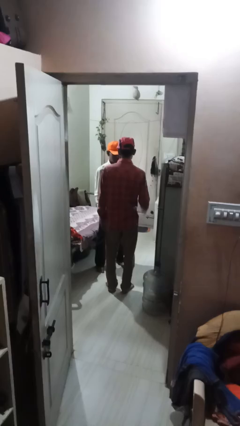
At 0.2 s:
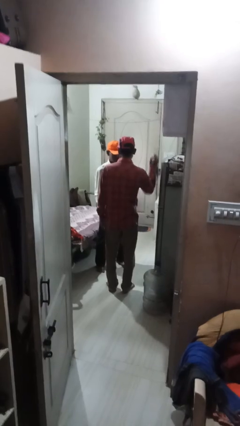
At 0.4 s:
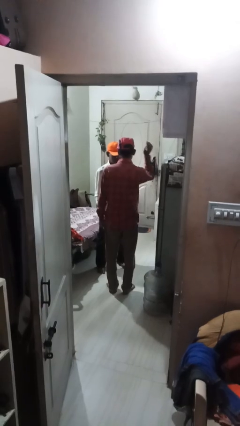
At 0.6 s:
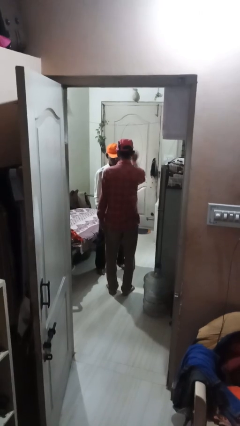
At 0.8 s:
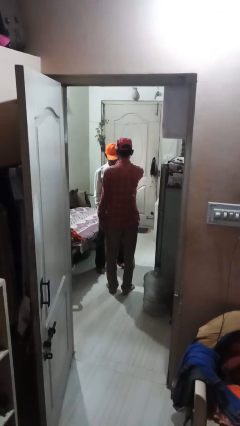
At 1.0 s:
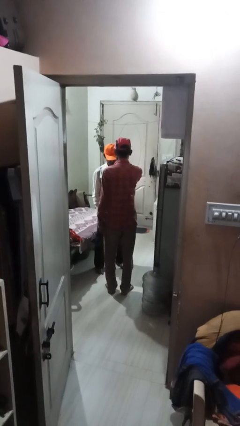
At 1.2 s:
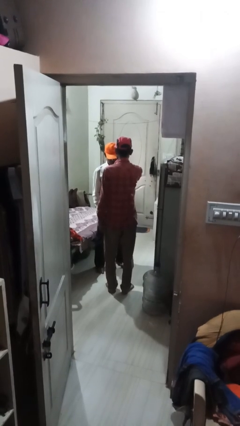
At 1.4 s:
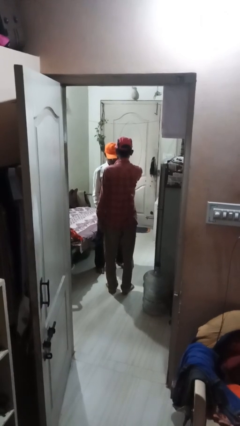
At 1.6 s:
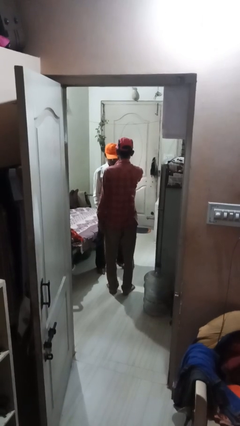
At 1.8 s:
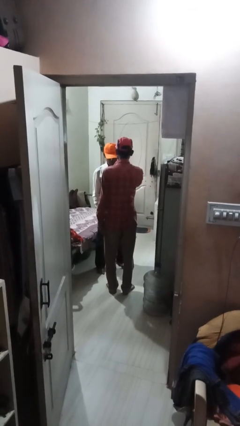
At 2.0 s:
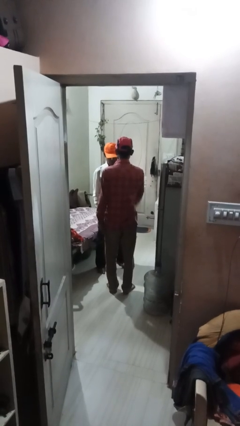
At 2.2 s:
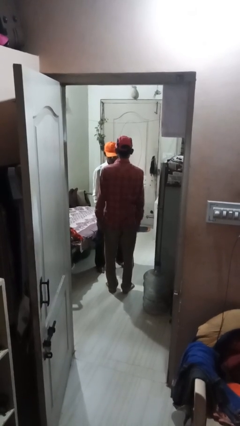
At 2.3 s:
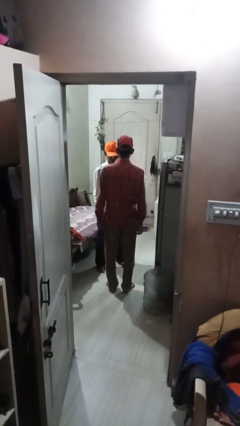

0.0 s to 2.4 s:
person pounds shoulders of person

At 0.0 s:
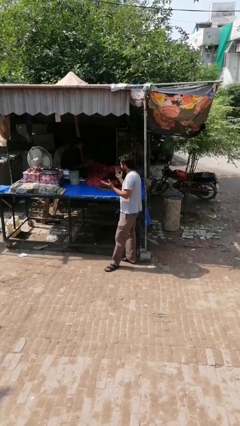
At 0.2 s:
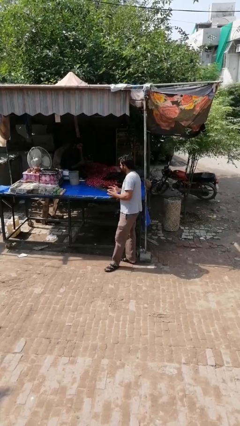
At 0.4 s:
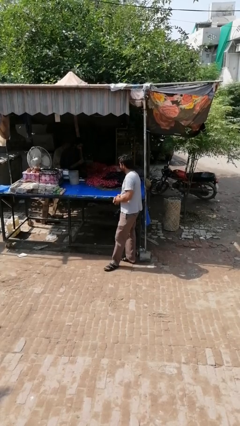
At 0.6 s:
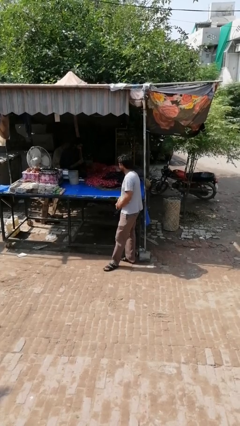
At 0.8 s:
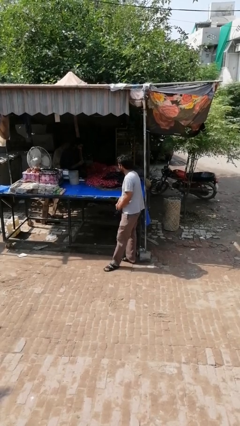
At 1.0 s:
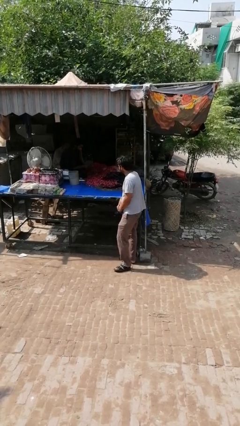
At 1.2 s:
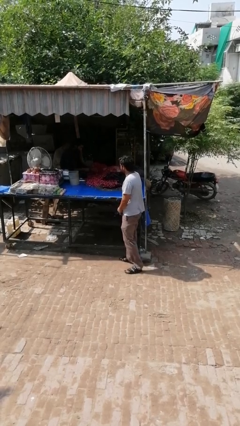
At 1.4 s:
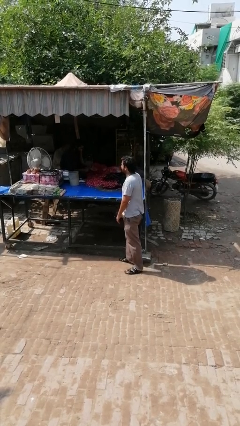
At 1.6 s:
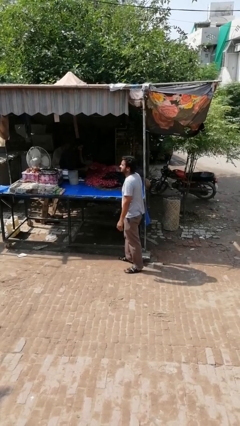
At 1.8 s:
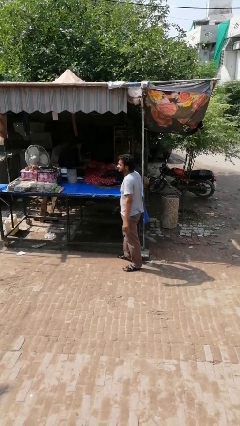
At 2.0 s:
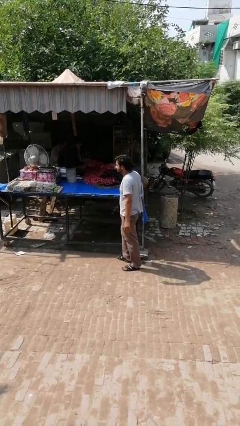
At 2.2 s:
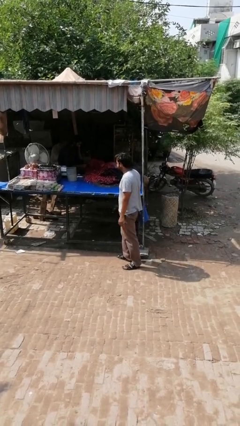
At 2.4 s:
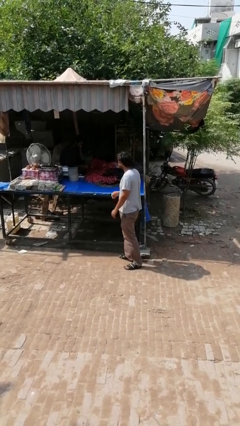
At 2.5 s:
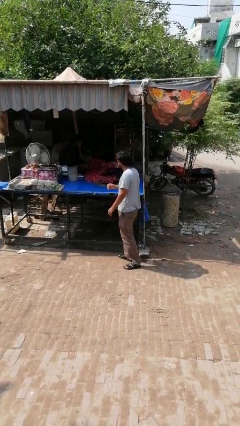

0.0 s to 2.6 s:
person laughs with person

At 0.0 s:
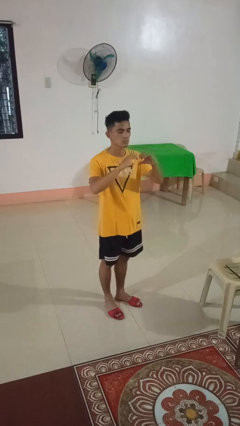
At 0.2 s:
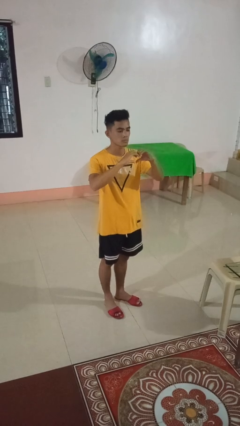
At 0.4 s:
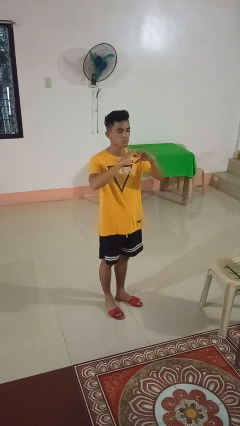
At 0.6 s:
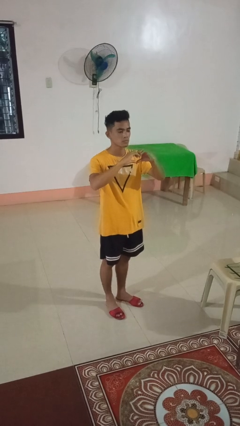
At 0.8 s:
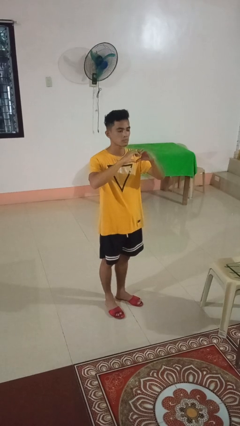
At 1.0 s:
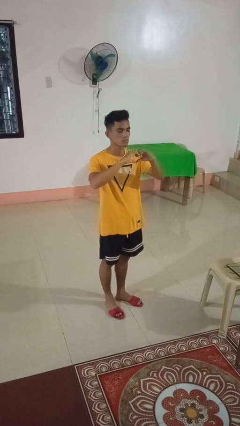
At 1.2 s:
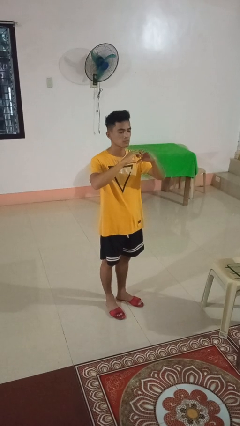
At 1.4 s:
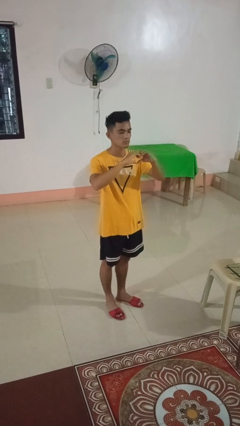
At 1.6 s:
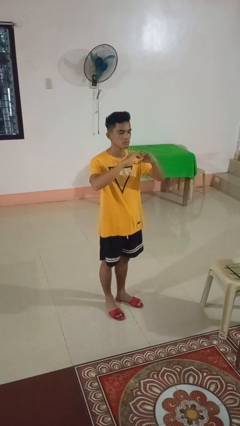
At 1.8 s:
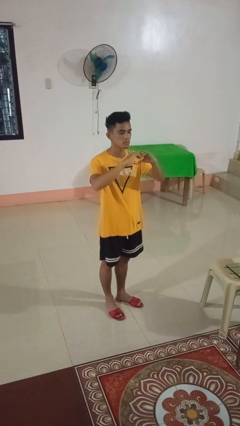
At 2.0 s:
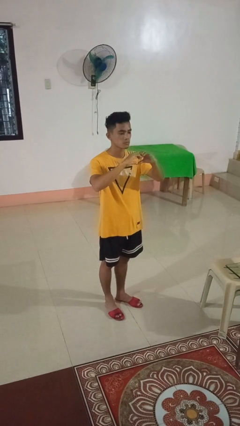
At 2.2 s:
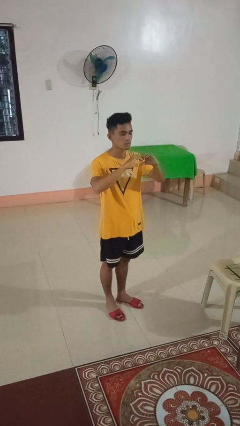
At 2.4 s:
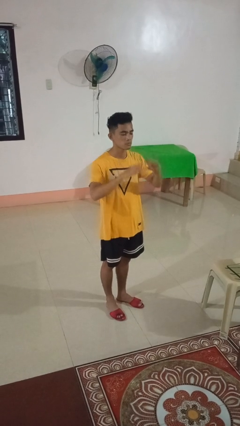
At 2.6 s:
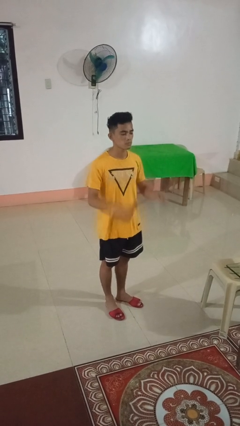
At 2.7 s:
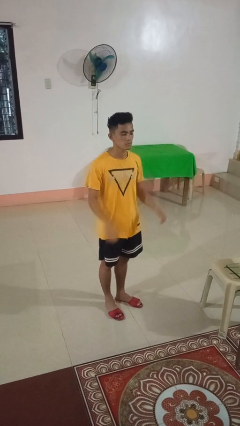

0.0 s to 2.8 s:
person gestures heart

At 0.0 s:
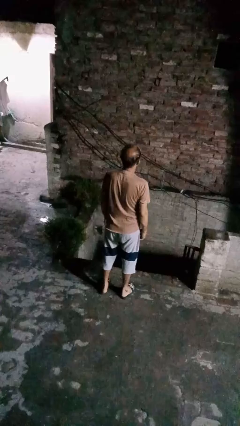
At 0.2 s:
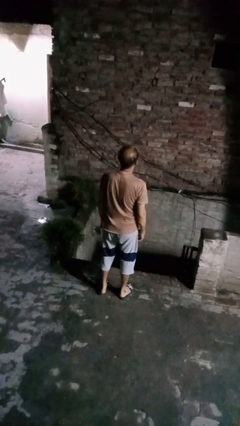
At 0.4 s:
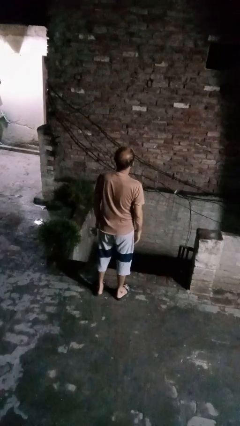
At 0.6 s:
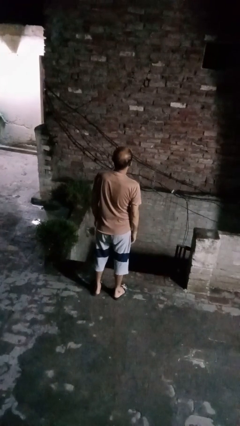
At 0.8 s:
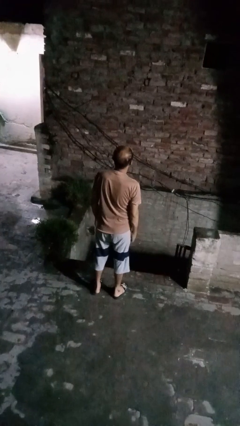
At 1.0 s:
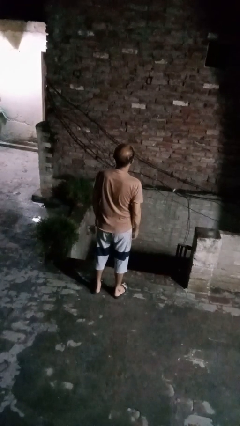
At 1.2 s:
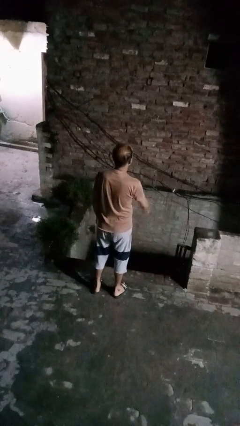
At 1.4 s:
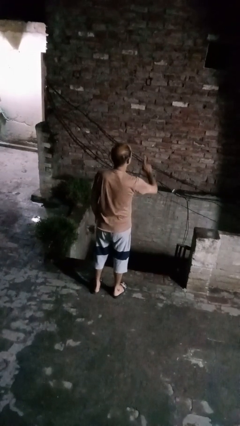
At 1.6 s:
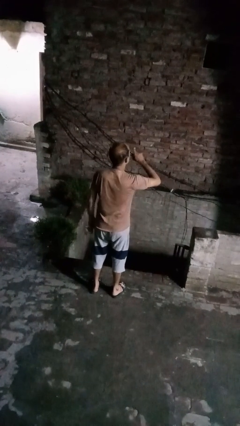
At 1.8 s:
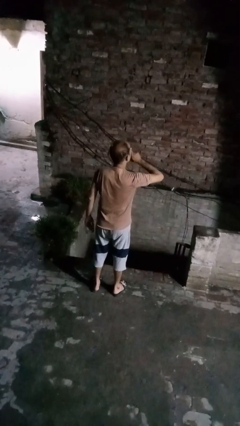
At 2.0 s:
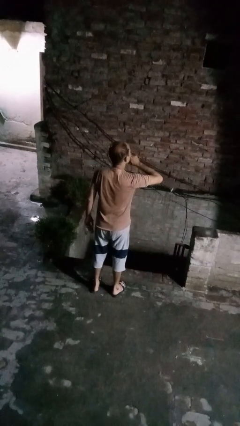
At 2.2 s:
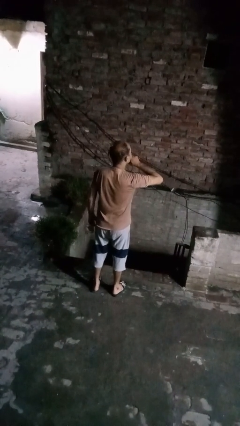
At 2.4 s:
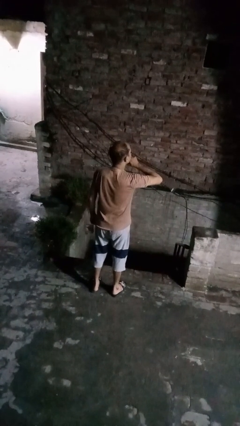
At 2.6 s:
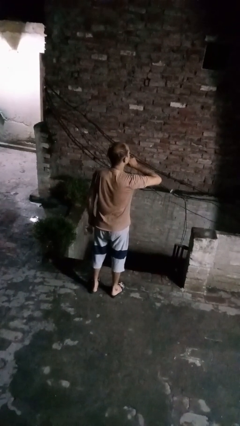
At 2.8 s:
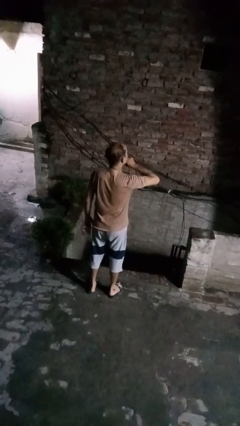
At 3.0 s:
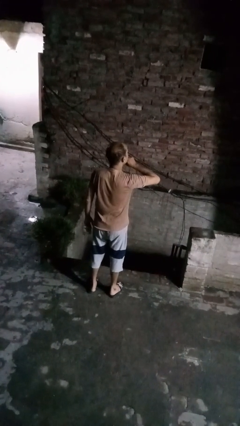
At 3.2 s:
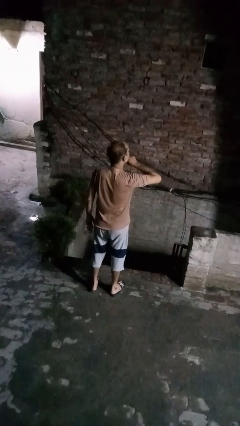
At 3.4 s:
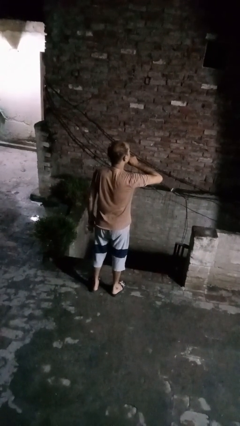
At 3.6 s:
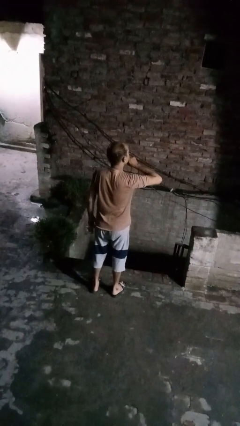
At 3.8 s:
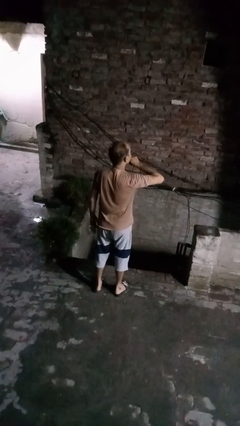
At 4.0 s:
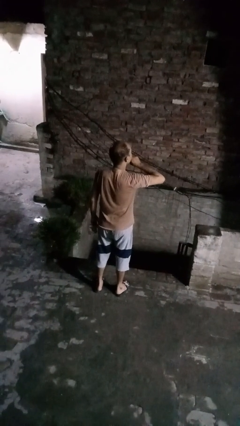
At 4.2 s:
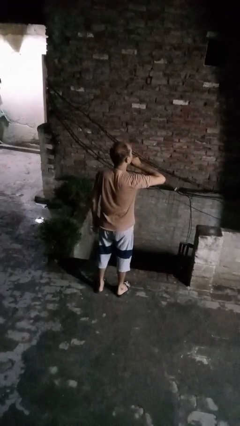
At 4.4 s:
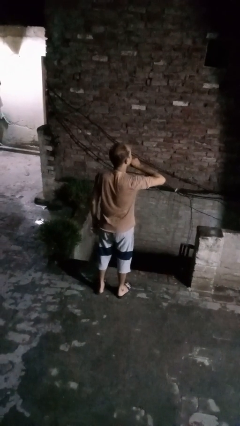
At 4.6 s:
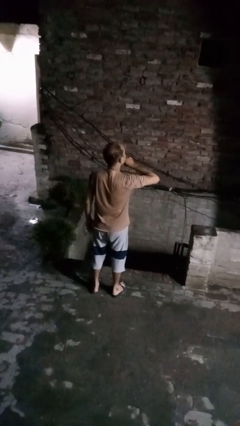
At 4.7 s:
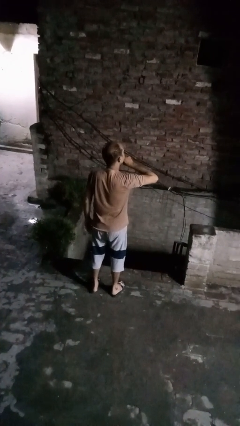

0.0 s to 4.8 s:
person gestures be quiet

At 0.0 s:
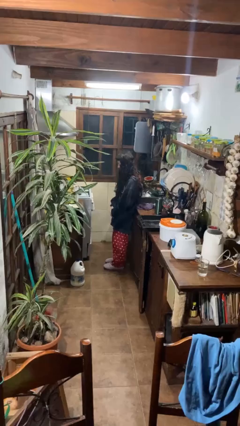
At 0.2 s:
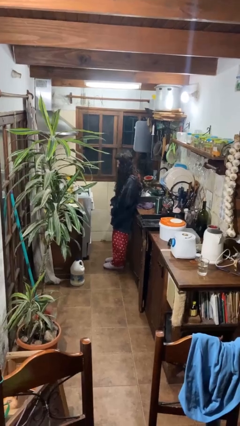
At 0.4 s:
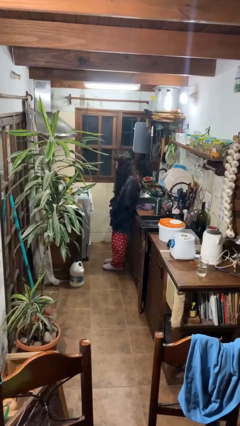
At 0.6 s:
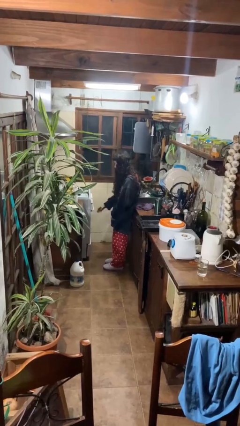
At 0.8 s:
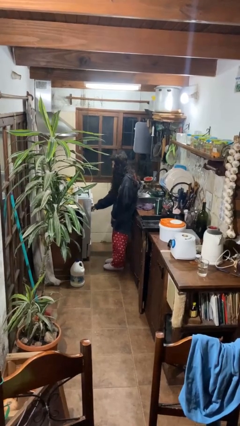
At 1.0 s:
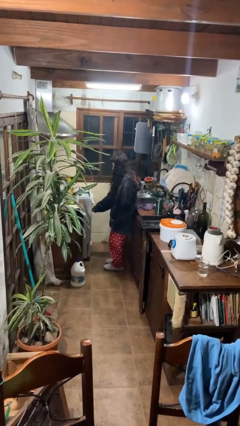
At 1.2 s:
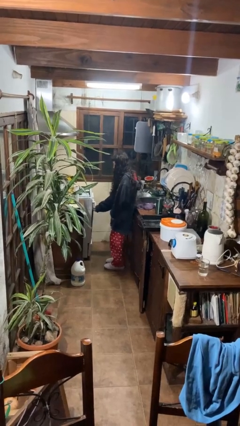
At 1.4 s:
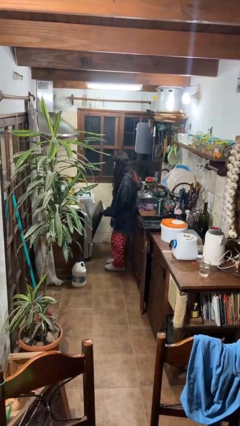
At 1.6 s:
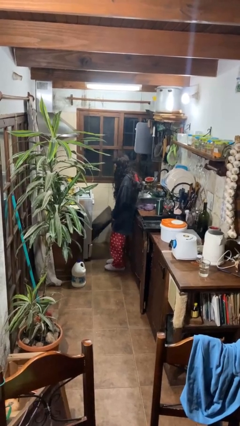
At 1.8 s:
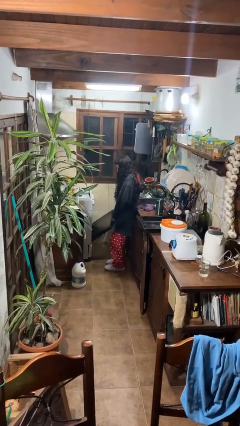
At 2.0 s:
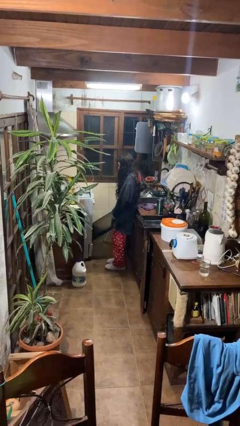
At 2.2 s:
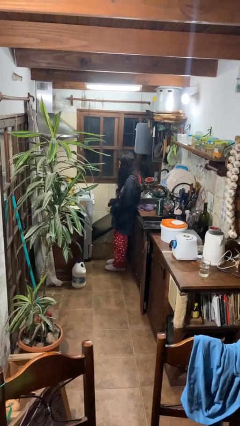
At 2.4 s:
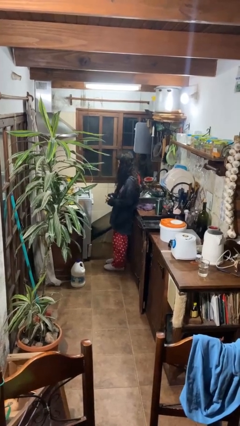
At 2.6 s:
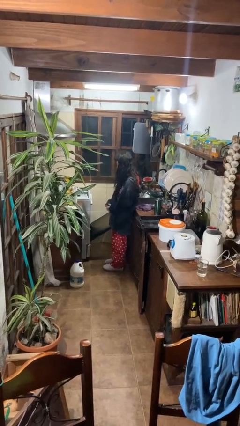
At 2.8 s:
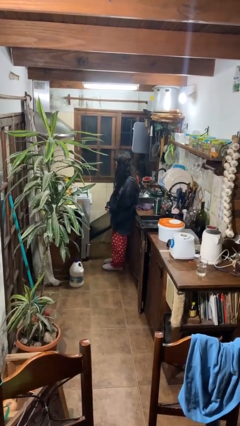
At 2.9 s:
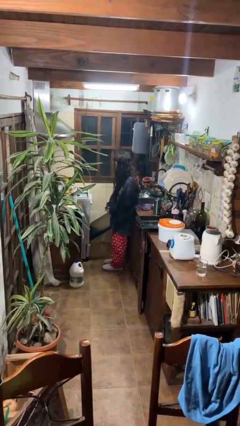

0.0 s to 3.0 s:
person opens oven door

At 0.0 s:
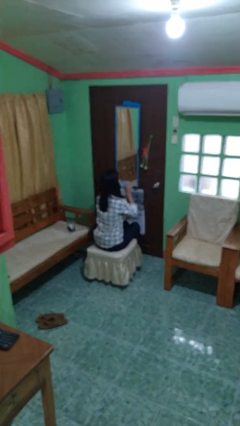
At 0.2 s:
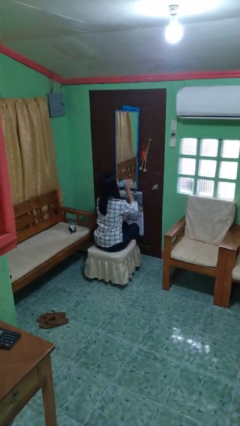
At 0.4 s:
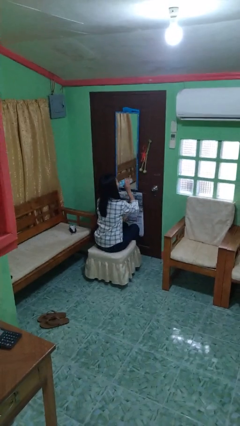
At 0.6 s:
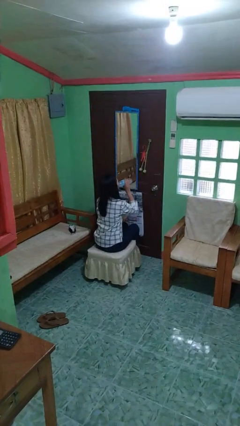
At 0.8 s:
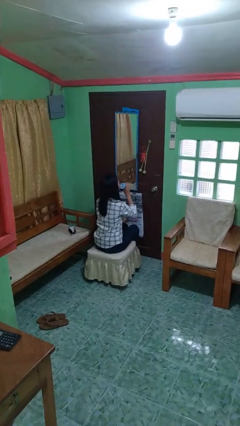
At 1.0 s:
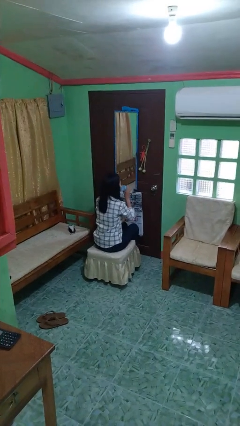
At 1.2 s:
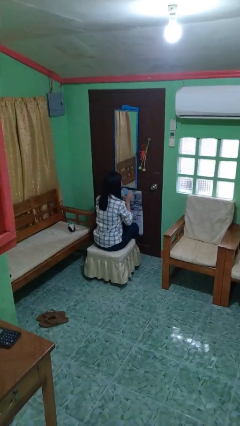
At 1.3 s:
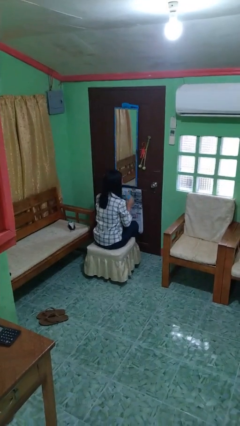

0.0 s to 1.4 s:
person drinks from bottle

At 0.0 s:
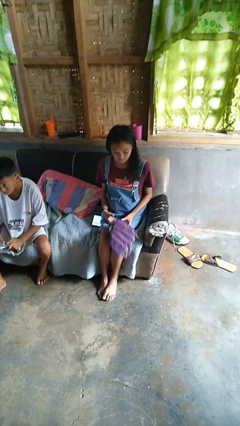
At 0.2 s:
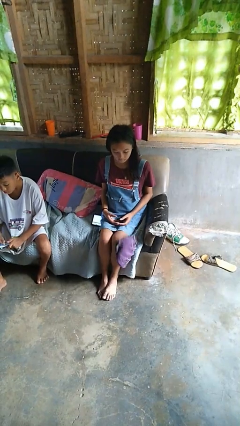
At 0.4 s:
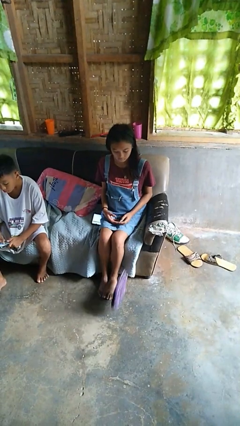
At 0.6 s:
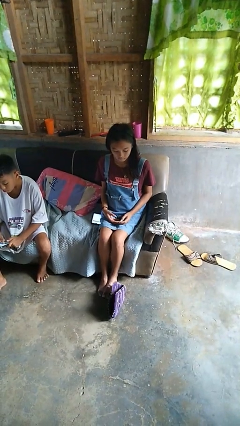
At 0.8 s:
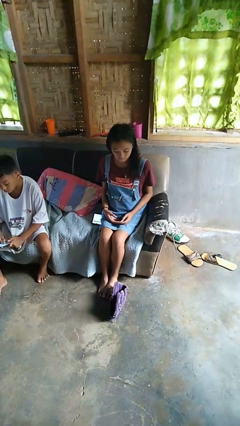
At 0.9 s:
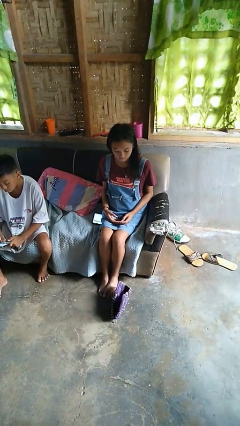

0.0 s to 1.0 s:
person drops object
